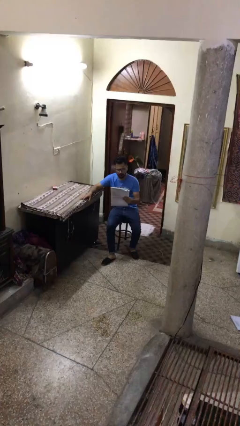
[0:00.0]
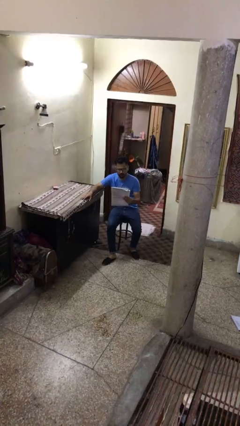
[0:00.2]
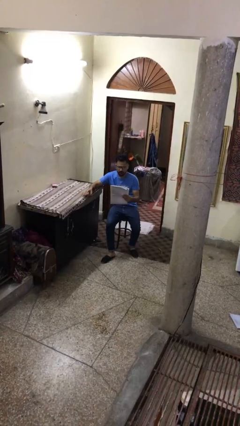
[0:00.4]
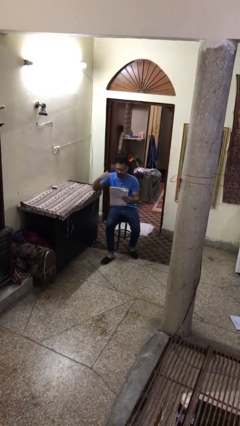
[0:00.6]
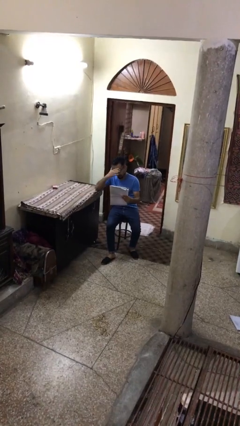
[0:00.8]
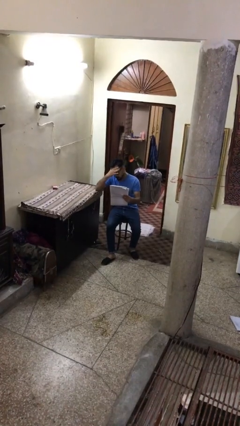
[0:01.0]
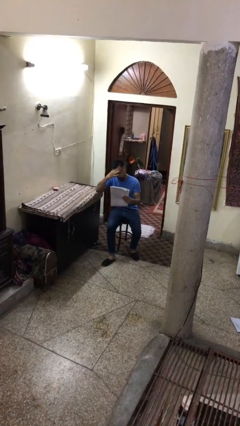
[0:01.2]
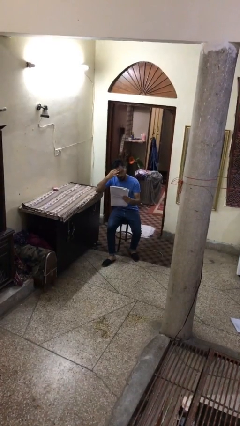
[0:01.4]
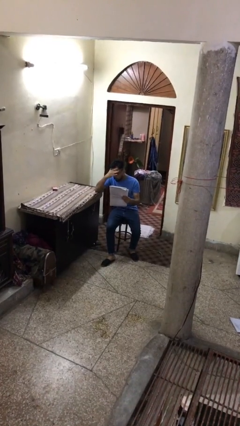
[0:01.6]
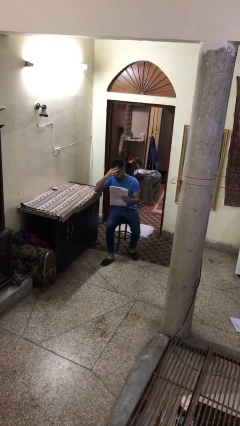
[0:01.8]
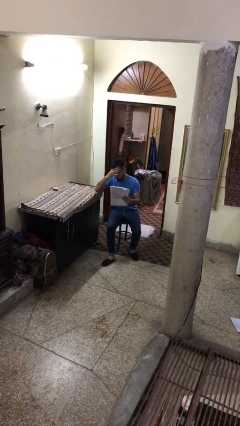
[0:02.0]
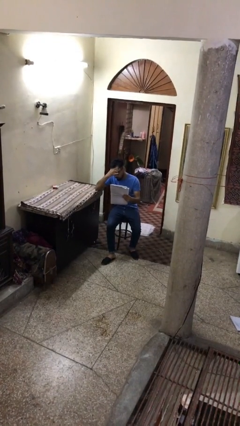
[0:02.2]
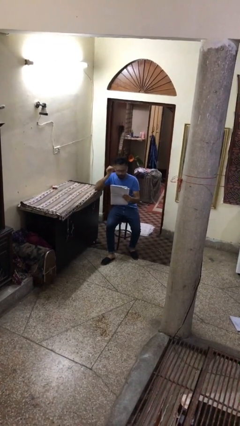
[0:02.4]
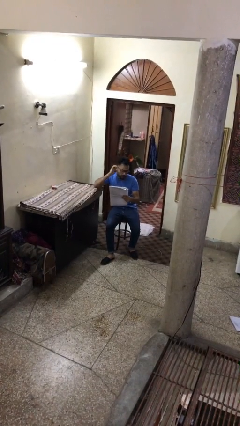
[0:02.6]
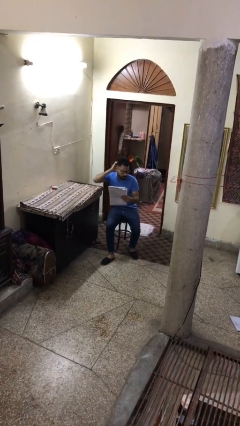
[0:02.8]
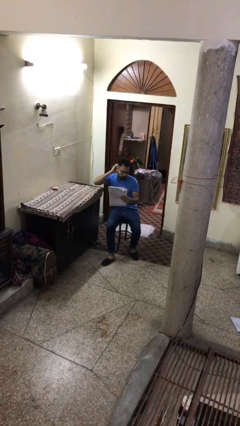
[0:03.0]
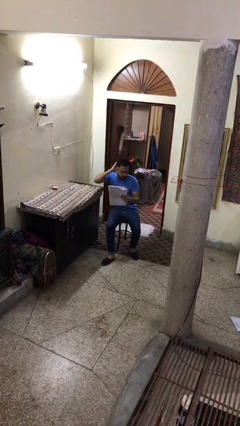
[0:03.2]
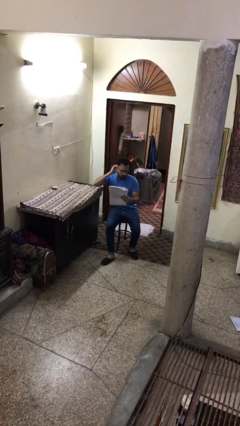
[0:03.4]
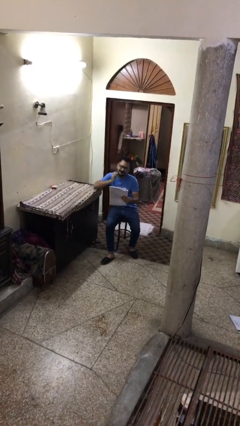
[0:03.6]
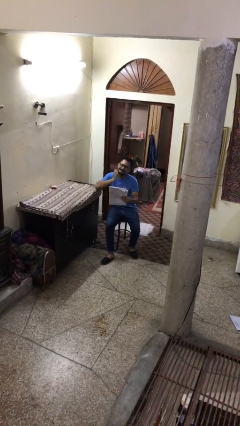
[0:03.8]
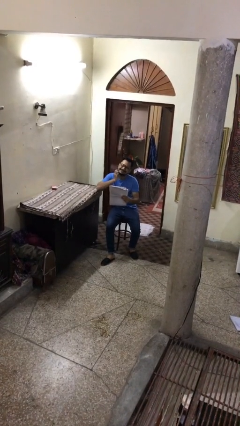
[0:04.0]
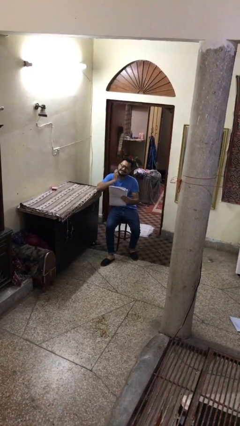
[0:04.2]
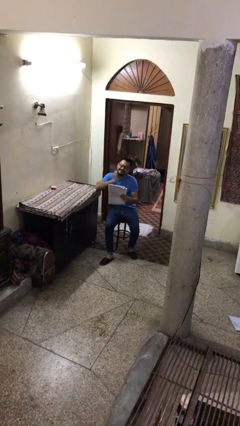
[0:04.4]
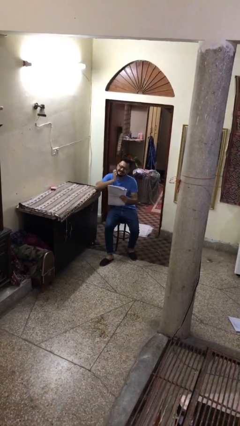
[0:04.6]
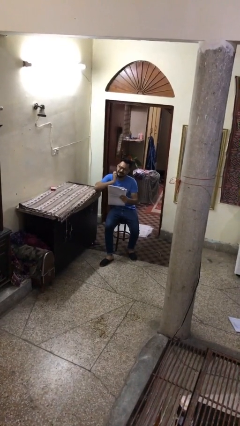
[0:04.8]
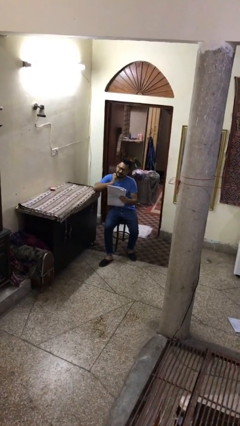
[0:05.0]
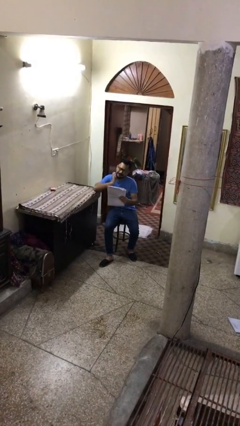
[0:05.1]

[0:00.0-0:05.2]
person reads document

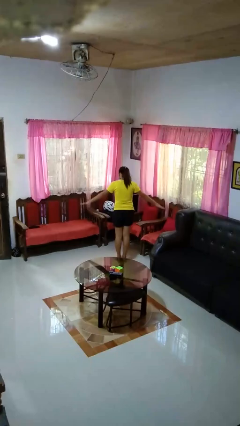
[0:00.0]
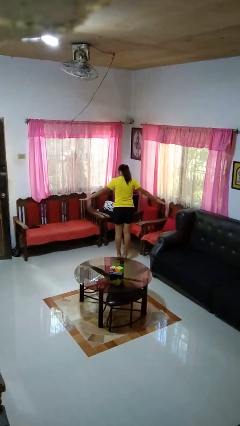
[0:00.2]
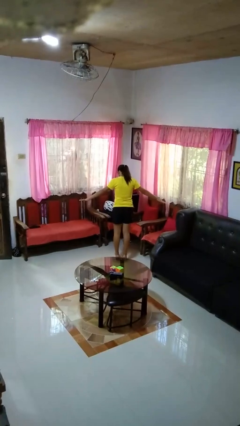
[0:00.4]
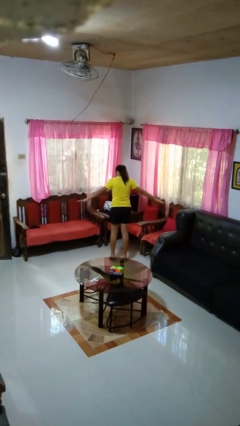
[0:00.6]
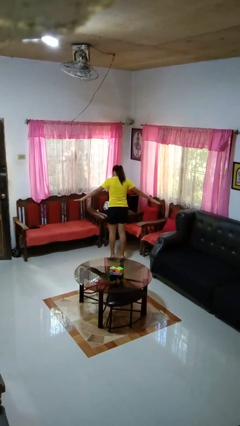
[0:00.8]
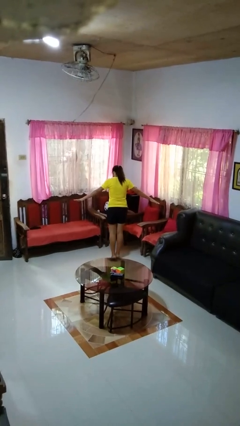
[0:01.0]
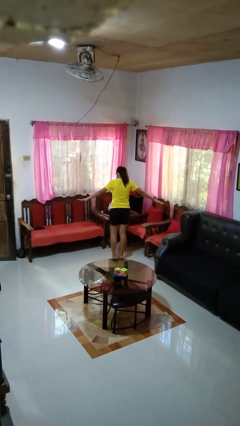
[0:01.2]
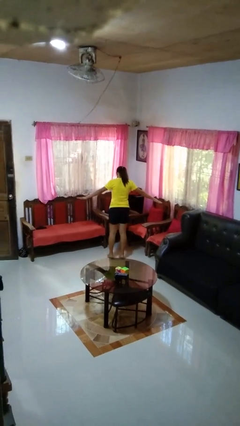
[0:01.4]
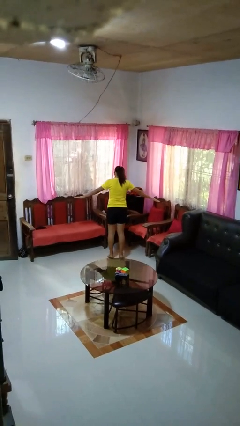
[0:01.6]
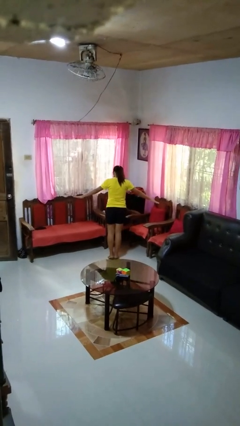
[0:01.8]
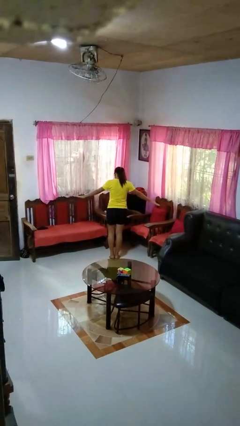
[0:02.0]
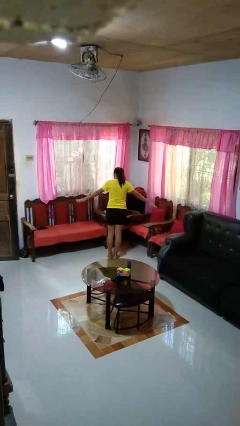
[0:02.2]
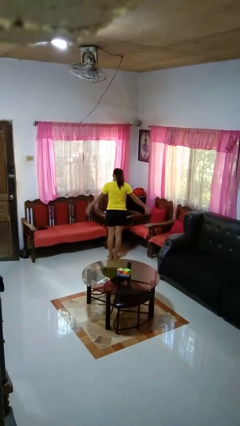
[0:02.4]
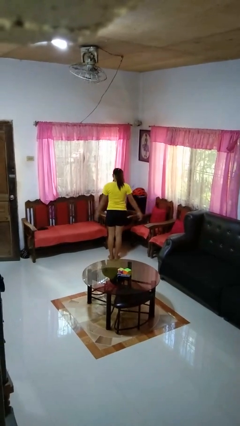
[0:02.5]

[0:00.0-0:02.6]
person walks tiptoe

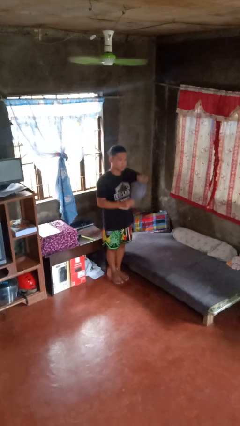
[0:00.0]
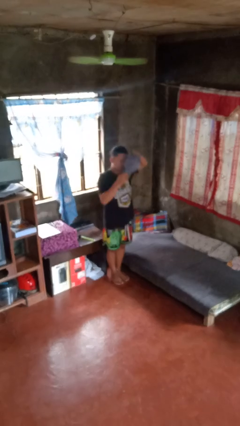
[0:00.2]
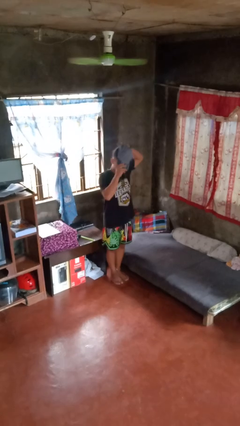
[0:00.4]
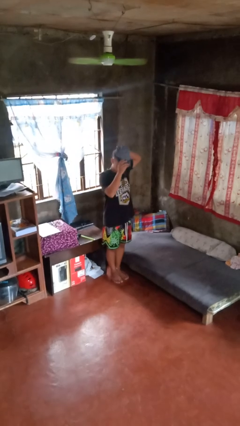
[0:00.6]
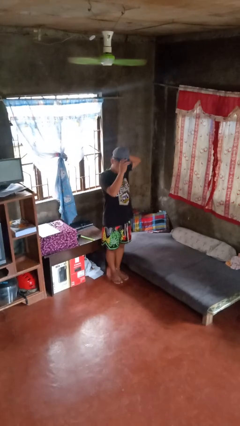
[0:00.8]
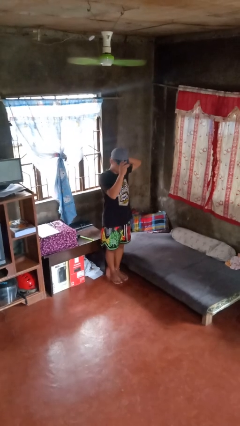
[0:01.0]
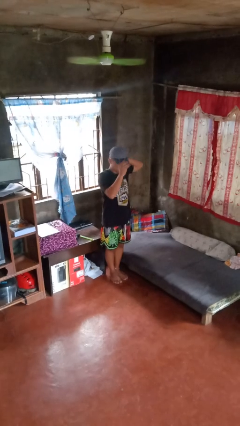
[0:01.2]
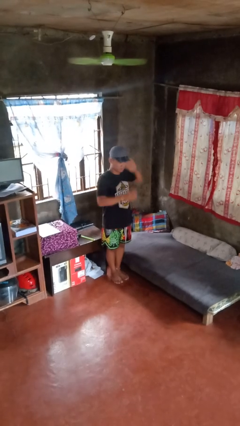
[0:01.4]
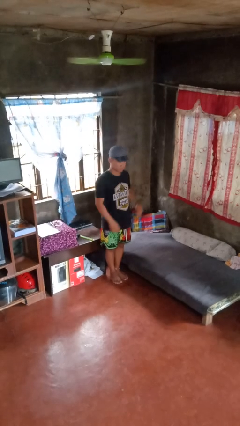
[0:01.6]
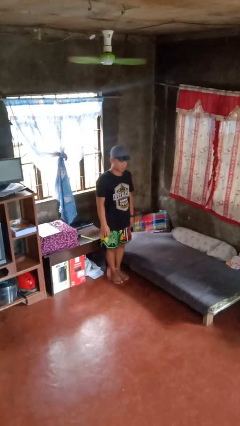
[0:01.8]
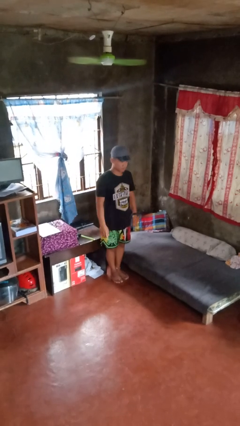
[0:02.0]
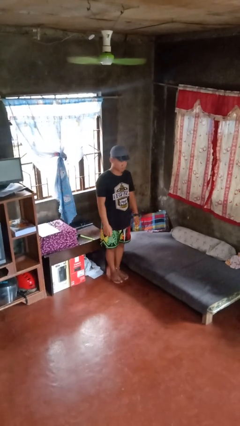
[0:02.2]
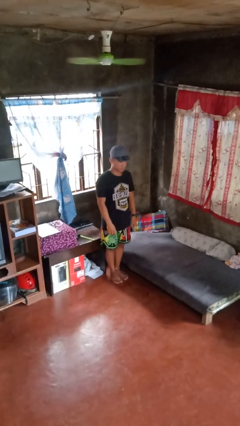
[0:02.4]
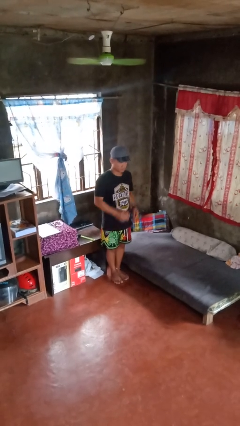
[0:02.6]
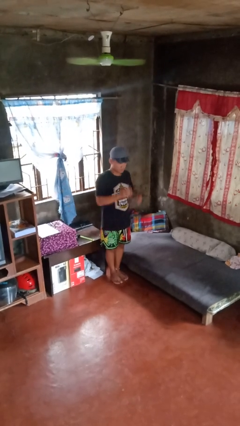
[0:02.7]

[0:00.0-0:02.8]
person puts on hat

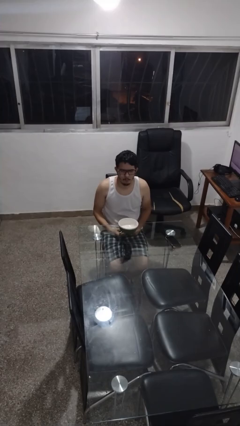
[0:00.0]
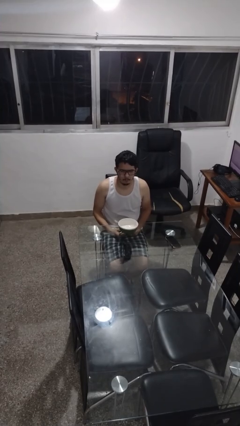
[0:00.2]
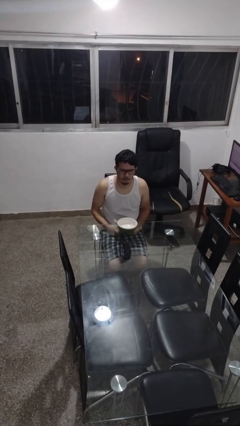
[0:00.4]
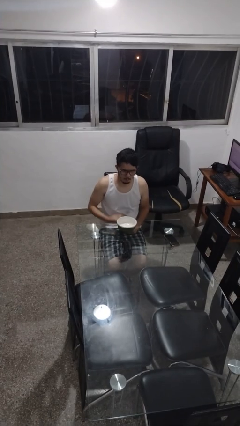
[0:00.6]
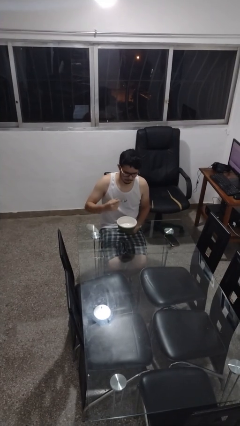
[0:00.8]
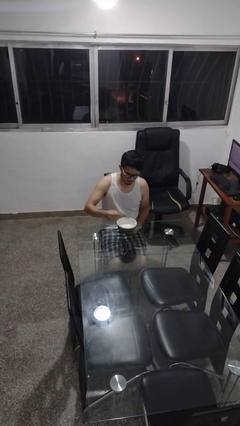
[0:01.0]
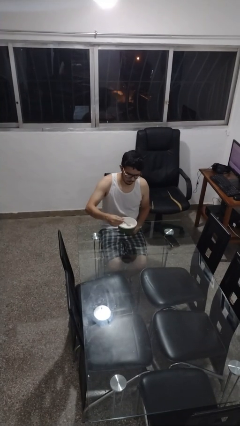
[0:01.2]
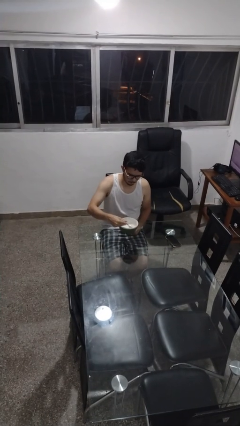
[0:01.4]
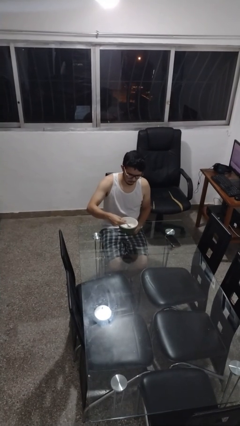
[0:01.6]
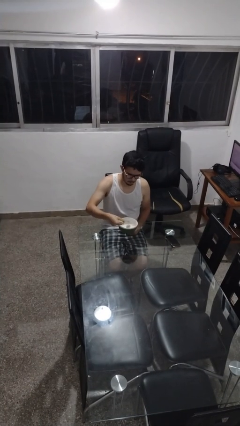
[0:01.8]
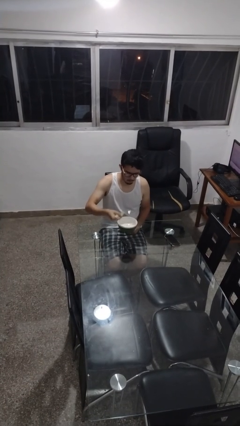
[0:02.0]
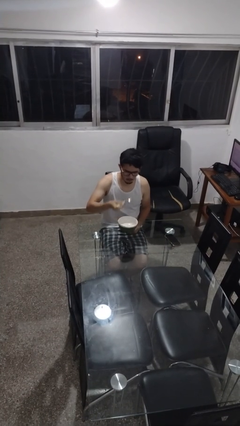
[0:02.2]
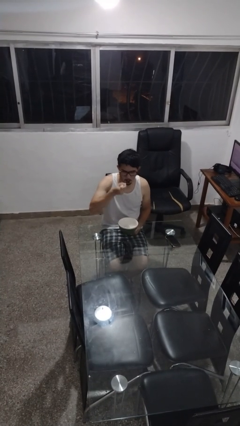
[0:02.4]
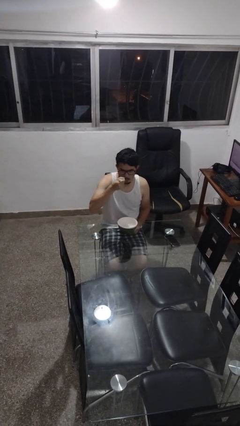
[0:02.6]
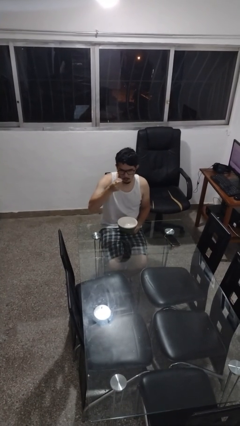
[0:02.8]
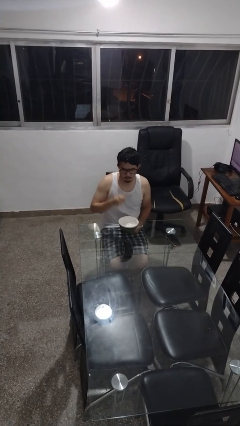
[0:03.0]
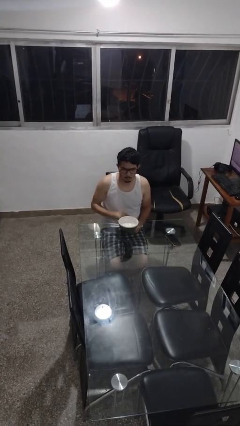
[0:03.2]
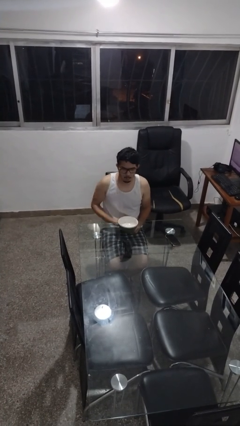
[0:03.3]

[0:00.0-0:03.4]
person eats with utensil

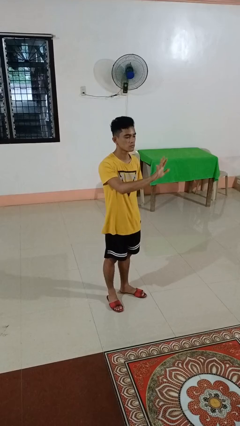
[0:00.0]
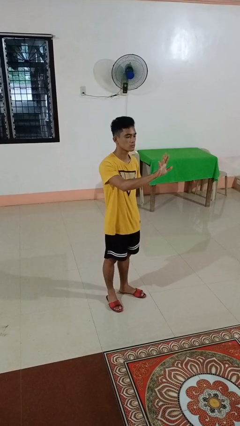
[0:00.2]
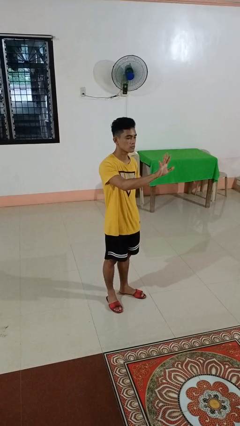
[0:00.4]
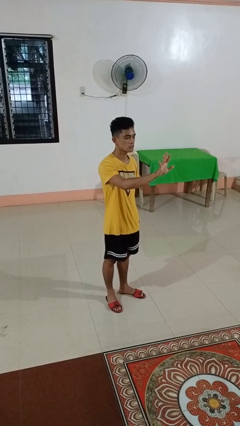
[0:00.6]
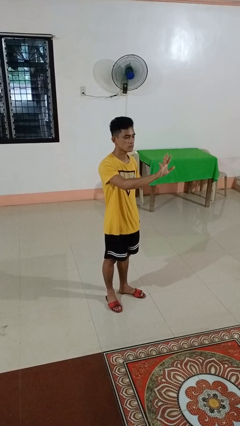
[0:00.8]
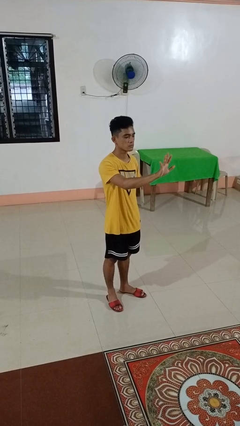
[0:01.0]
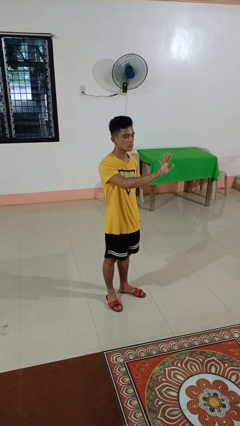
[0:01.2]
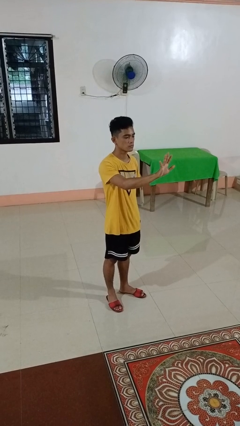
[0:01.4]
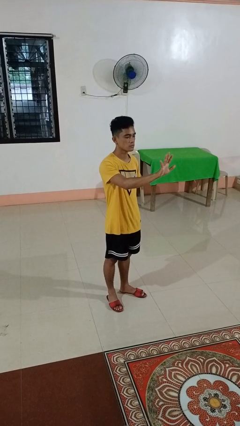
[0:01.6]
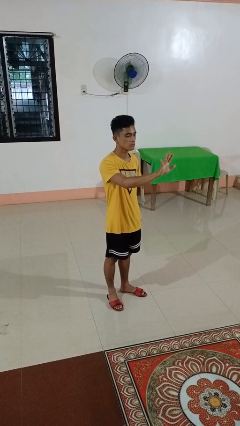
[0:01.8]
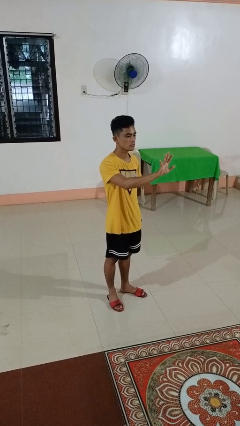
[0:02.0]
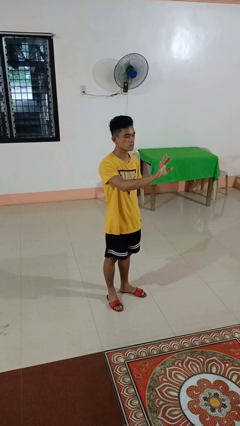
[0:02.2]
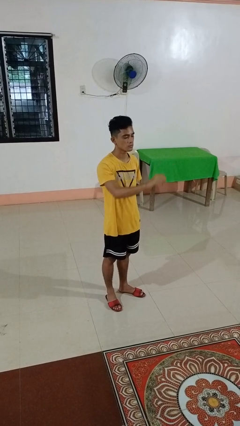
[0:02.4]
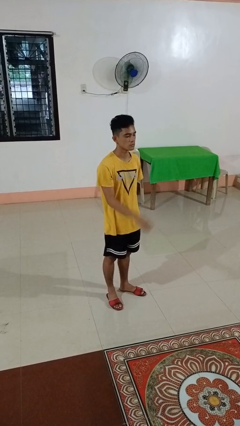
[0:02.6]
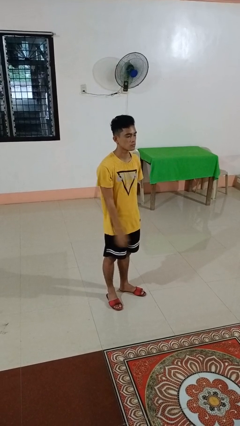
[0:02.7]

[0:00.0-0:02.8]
person gestures number five

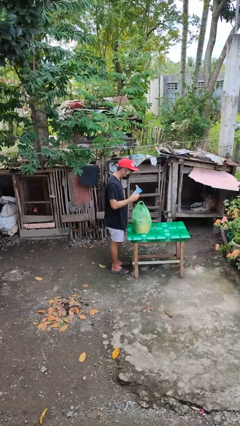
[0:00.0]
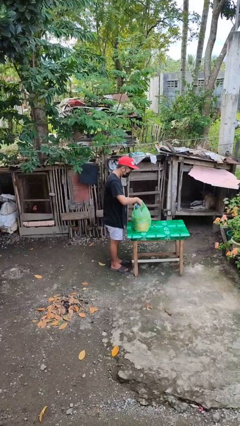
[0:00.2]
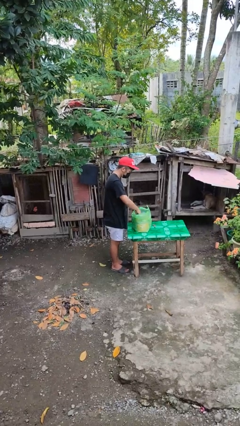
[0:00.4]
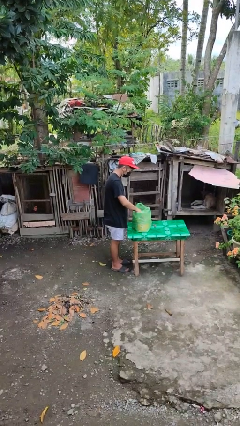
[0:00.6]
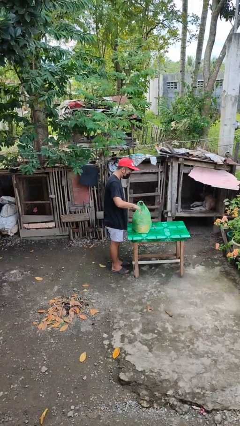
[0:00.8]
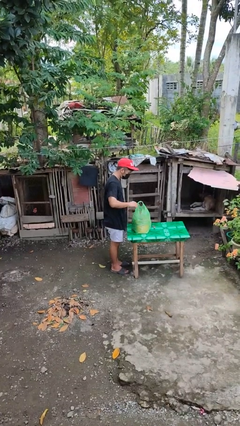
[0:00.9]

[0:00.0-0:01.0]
person puts object into bag
